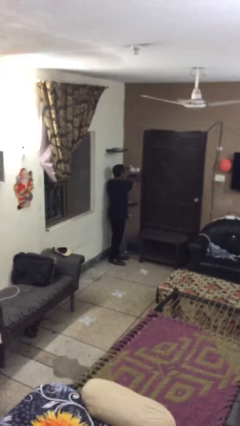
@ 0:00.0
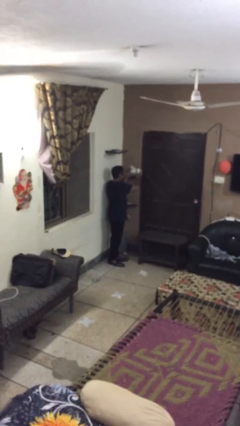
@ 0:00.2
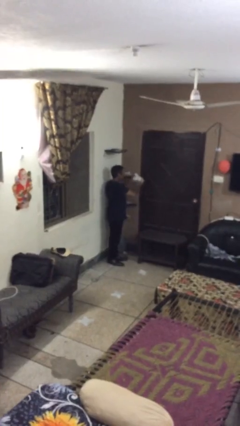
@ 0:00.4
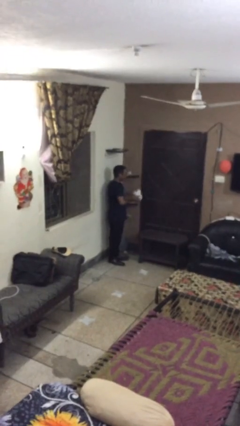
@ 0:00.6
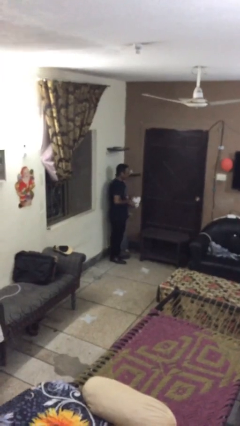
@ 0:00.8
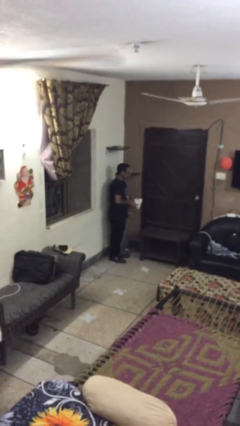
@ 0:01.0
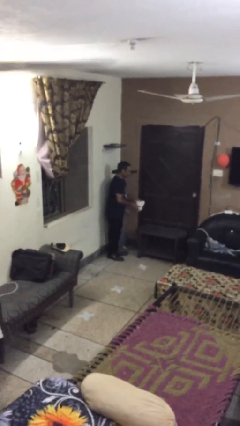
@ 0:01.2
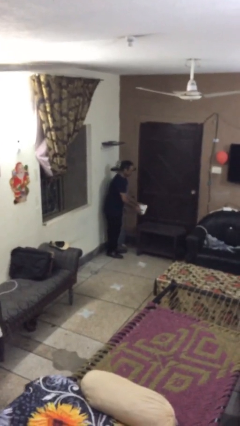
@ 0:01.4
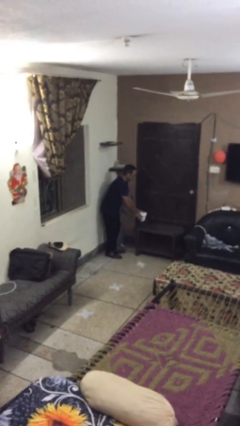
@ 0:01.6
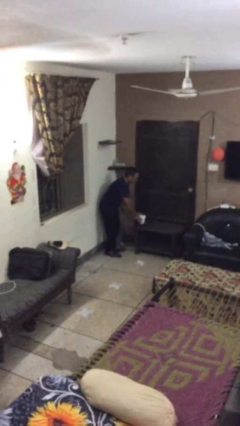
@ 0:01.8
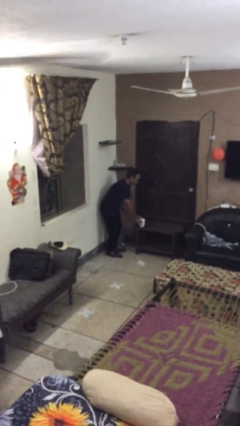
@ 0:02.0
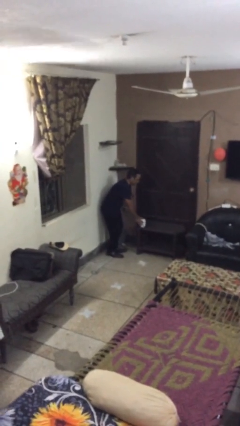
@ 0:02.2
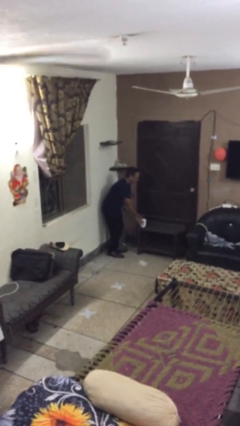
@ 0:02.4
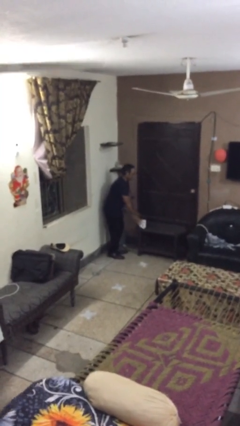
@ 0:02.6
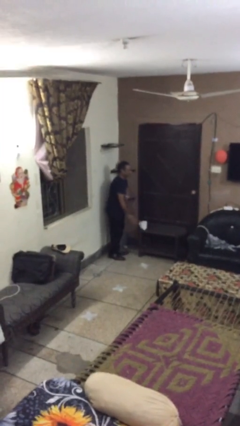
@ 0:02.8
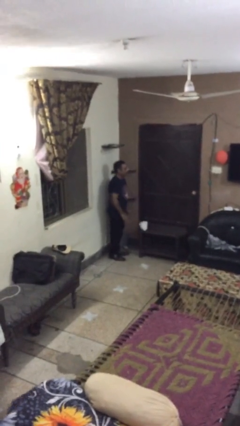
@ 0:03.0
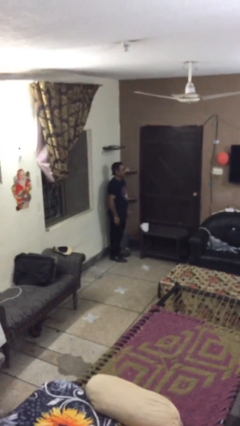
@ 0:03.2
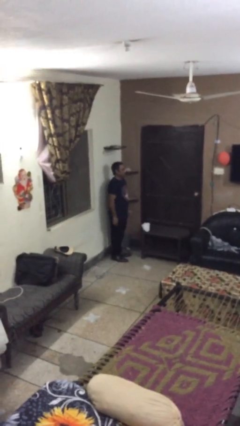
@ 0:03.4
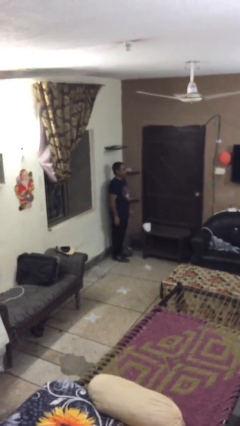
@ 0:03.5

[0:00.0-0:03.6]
person puts down object on table

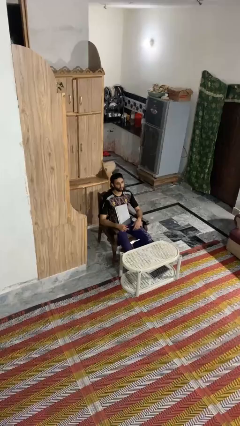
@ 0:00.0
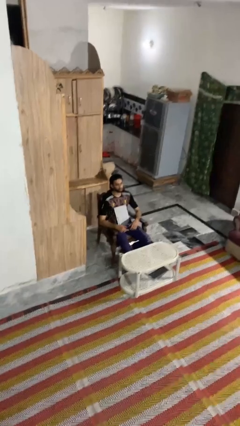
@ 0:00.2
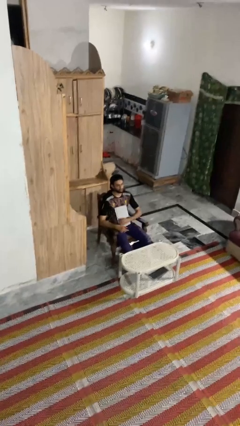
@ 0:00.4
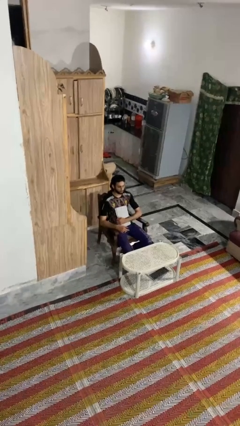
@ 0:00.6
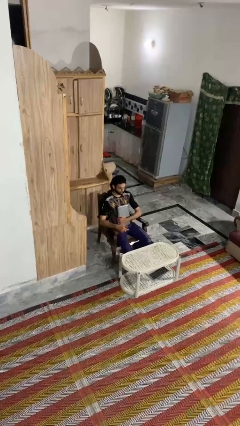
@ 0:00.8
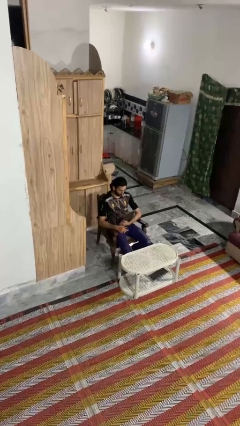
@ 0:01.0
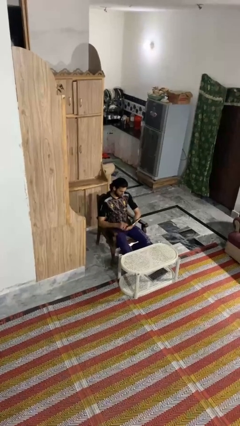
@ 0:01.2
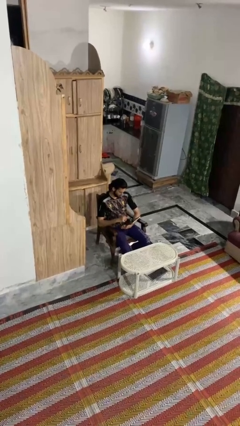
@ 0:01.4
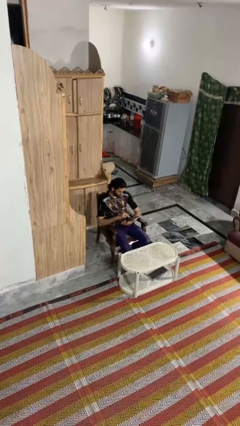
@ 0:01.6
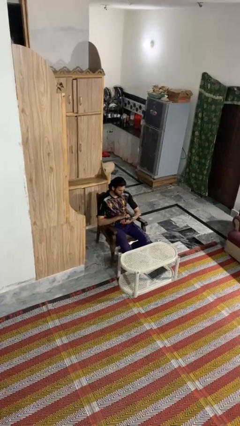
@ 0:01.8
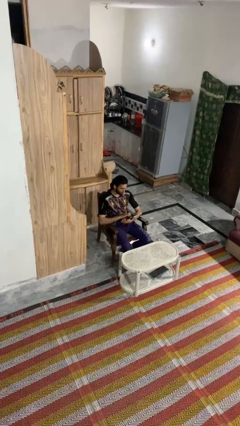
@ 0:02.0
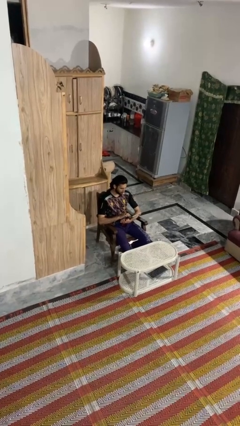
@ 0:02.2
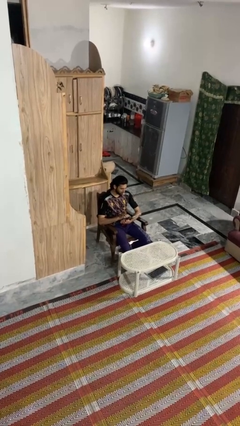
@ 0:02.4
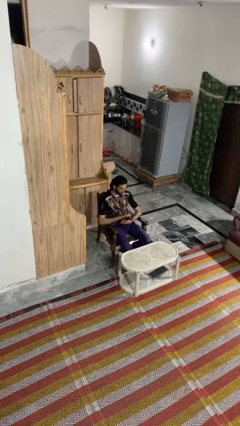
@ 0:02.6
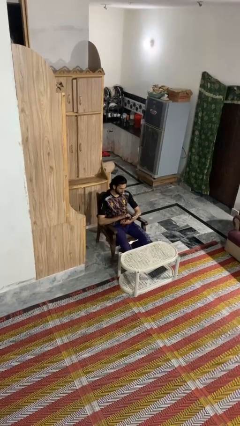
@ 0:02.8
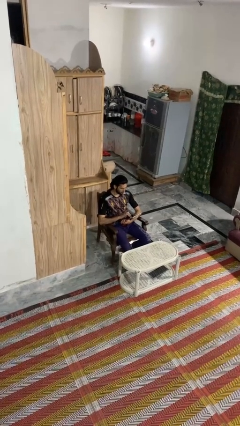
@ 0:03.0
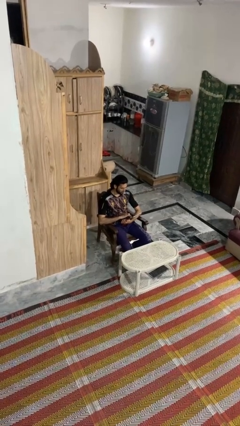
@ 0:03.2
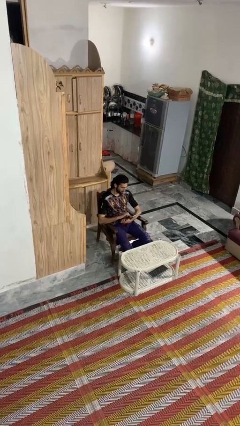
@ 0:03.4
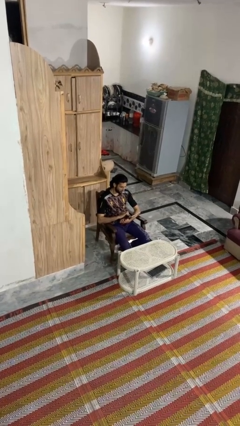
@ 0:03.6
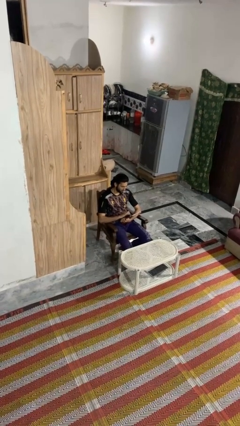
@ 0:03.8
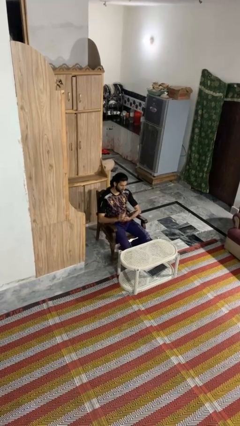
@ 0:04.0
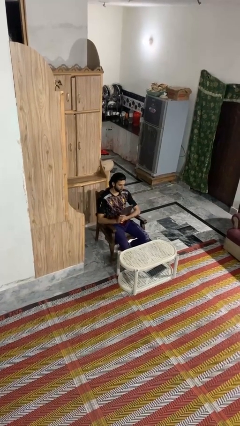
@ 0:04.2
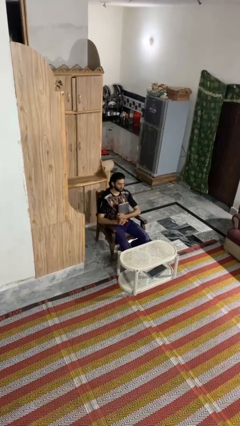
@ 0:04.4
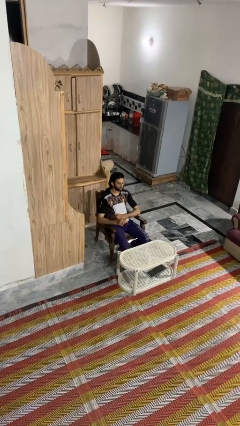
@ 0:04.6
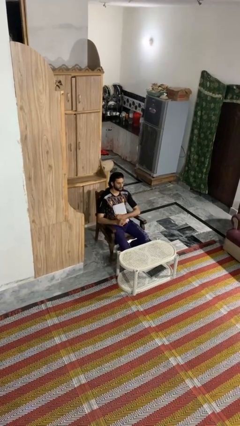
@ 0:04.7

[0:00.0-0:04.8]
person interacts with tablet

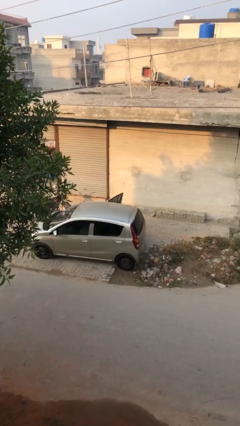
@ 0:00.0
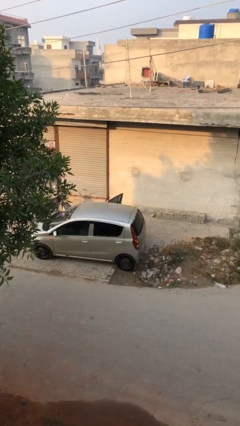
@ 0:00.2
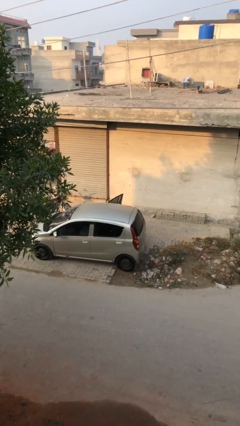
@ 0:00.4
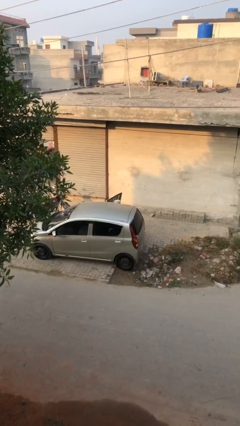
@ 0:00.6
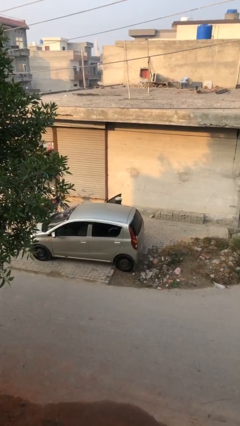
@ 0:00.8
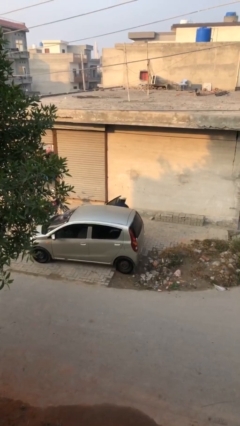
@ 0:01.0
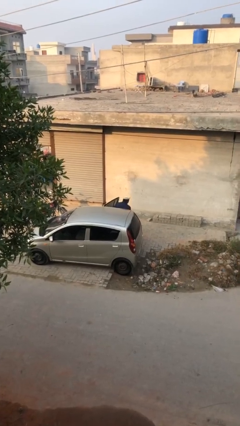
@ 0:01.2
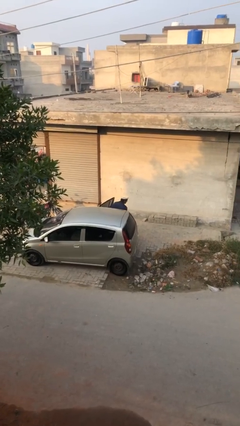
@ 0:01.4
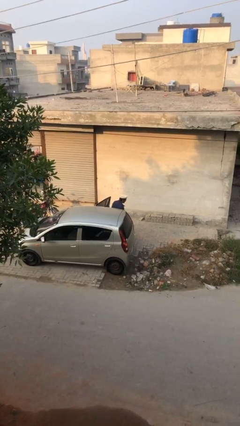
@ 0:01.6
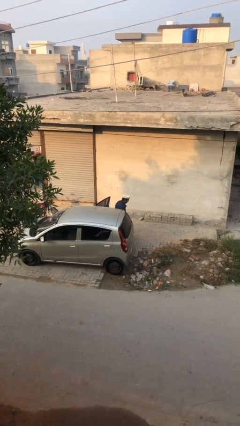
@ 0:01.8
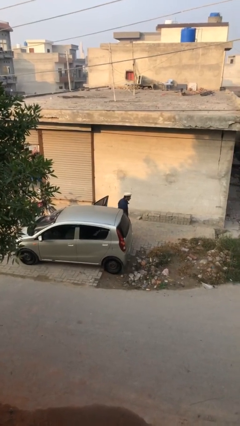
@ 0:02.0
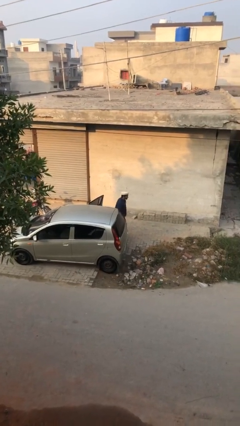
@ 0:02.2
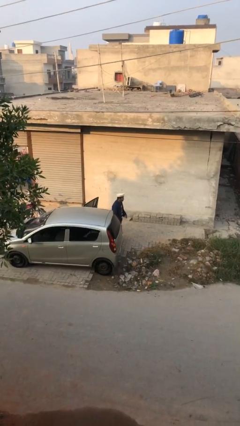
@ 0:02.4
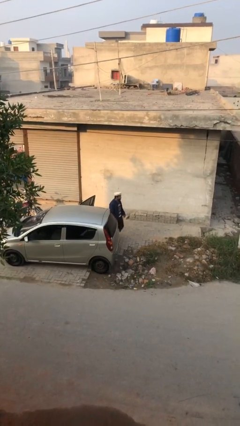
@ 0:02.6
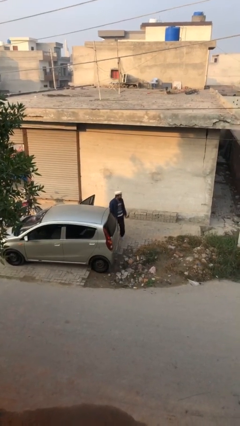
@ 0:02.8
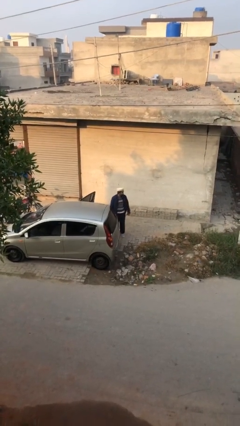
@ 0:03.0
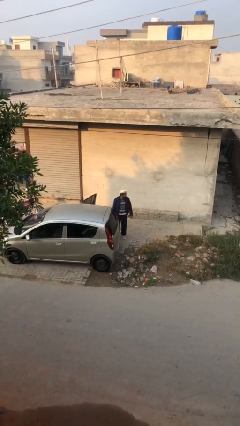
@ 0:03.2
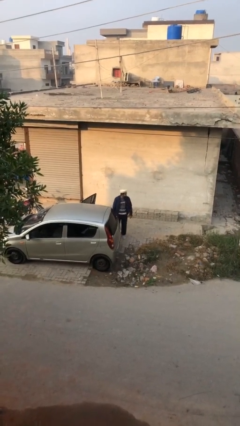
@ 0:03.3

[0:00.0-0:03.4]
person exits car

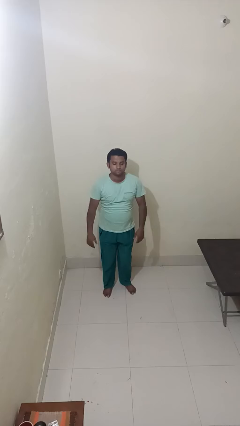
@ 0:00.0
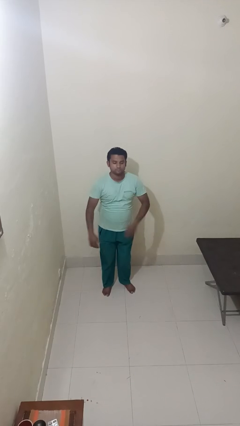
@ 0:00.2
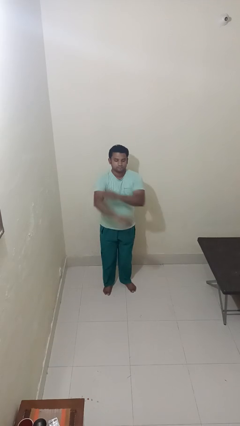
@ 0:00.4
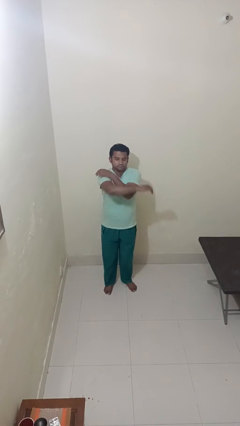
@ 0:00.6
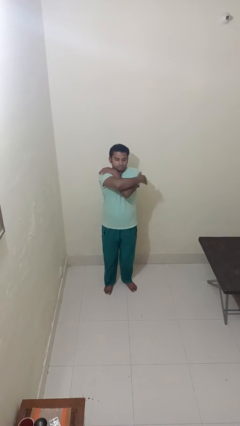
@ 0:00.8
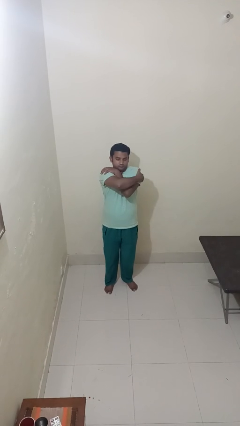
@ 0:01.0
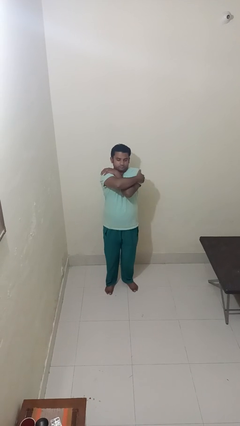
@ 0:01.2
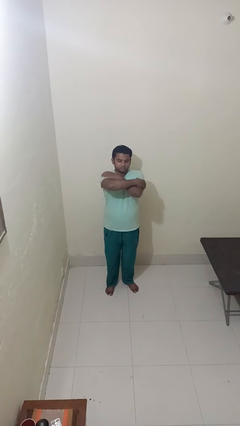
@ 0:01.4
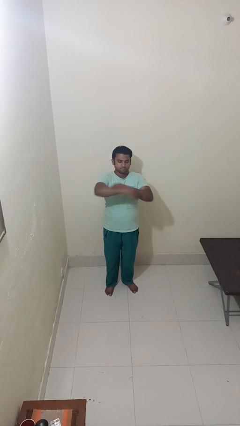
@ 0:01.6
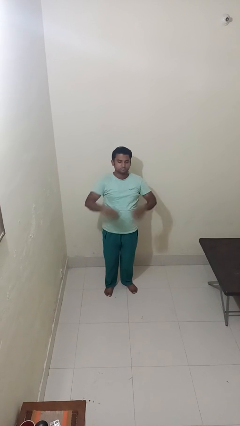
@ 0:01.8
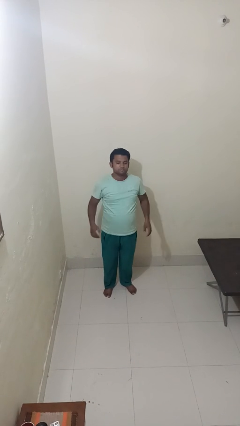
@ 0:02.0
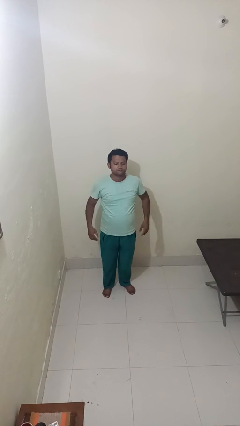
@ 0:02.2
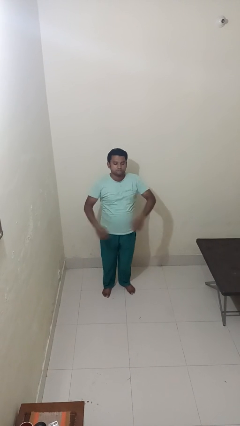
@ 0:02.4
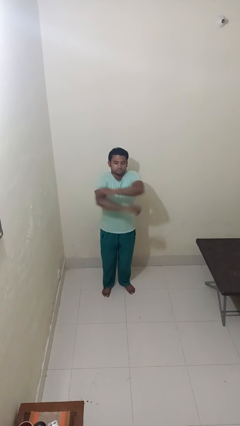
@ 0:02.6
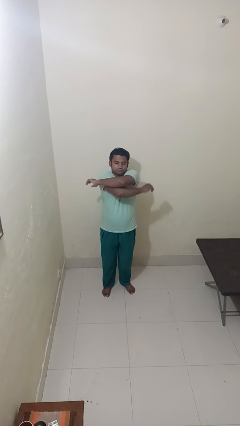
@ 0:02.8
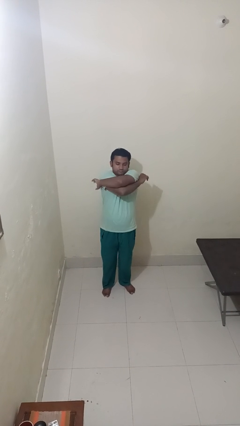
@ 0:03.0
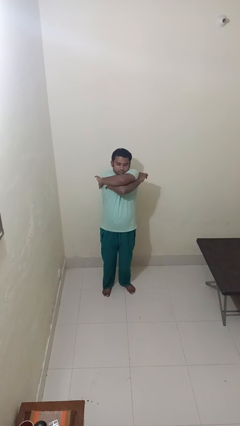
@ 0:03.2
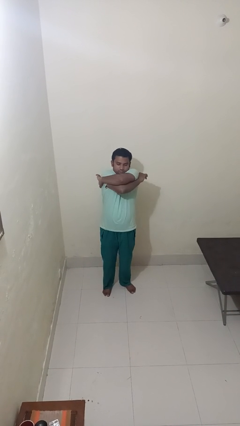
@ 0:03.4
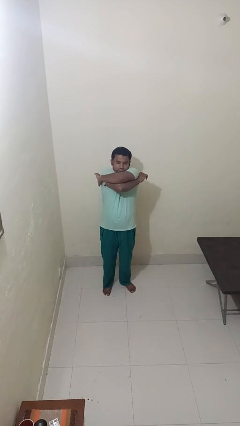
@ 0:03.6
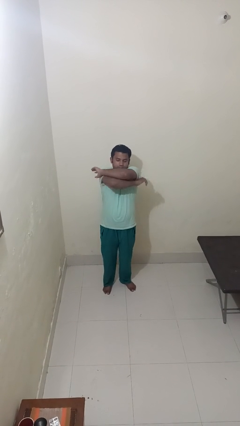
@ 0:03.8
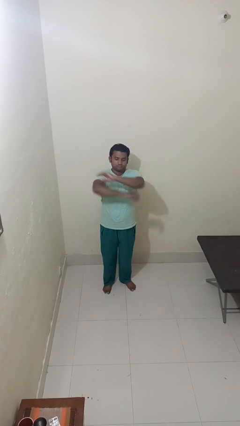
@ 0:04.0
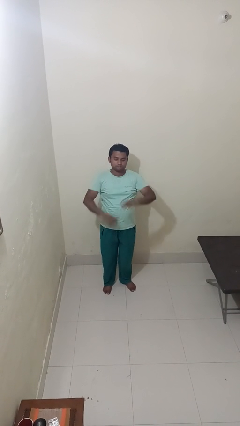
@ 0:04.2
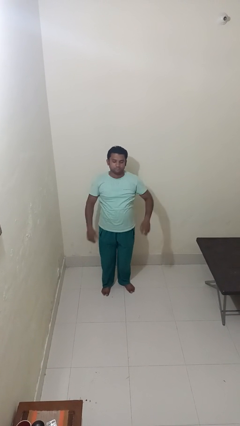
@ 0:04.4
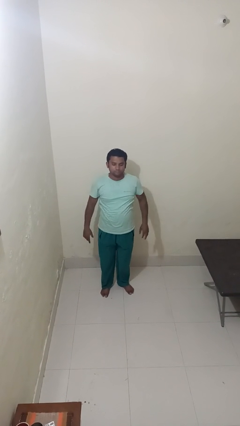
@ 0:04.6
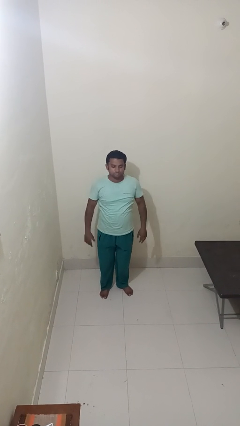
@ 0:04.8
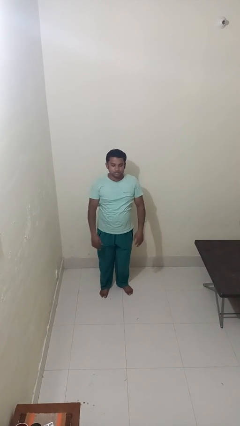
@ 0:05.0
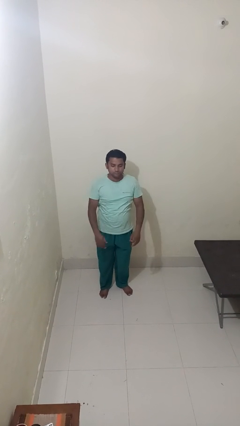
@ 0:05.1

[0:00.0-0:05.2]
person stretches arms to side

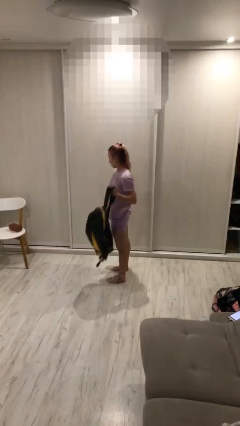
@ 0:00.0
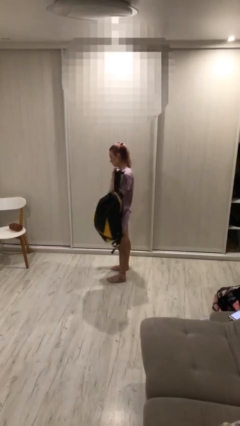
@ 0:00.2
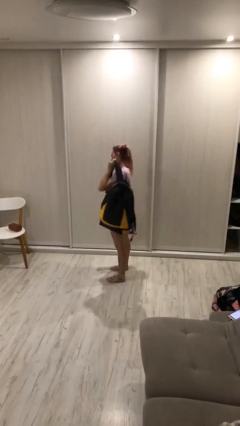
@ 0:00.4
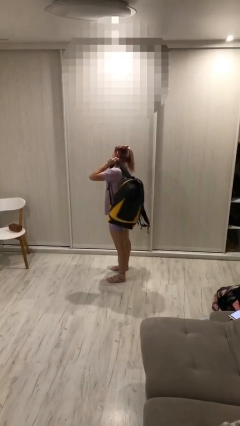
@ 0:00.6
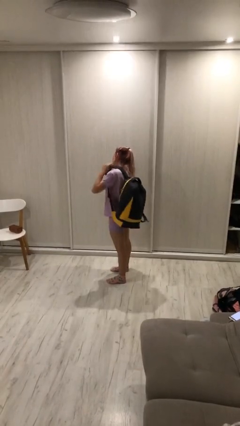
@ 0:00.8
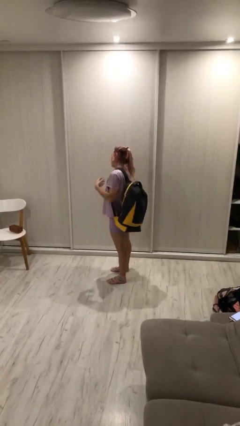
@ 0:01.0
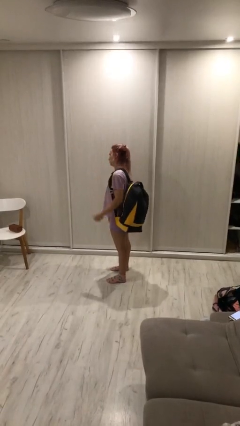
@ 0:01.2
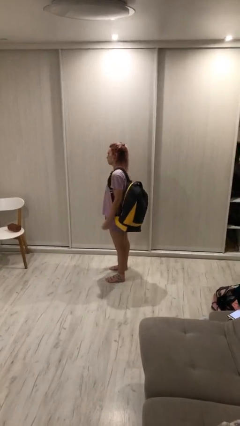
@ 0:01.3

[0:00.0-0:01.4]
person puts on backpack
